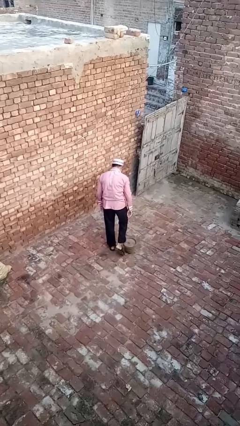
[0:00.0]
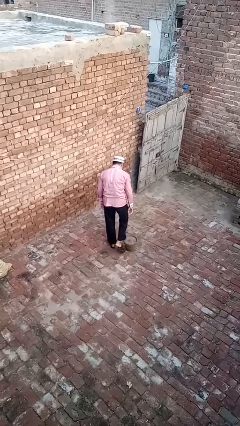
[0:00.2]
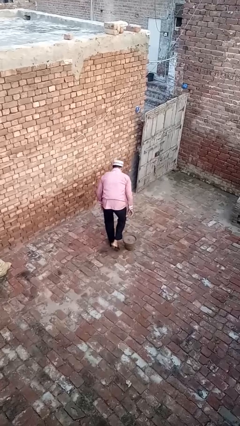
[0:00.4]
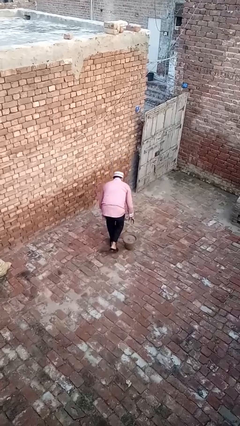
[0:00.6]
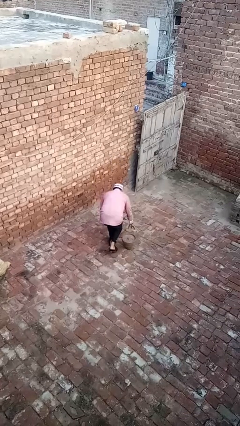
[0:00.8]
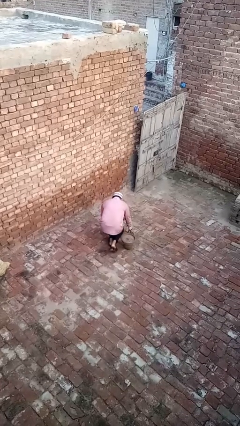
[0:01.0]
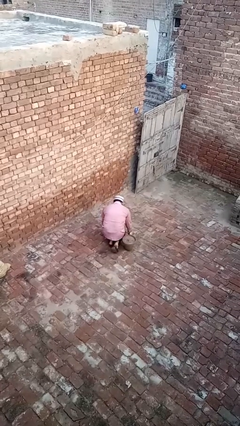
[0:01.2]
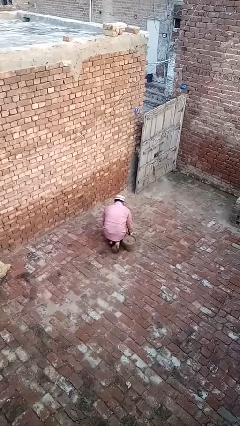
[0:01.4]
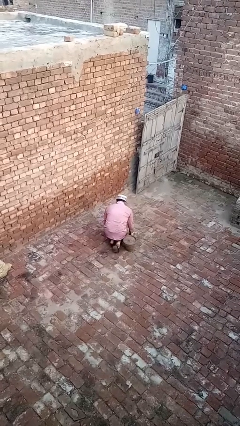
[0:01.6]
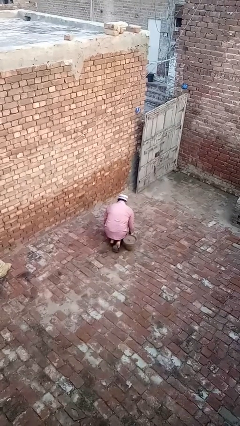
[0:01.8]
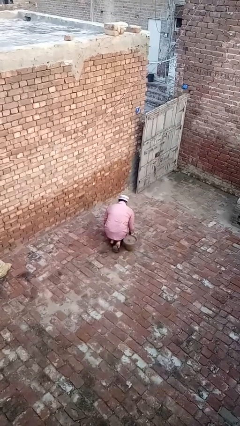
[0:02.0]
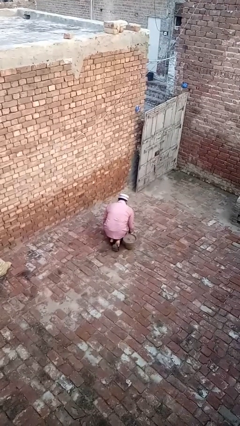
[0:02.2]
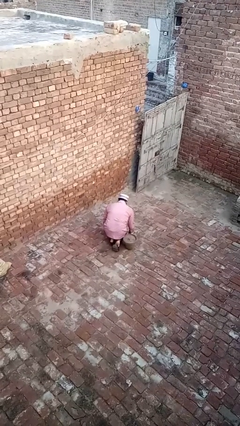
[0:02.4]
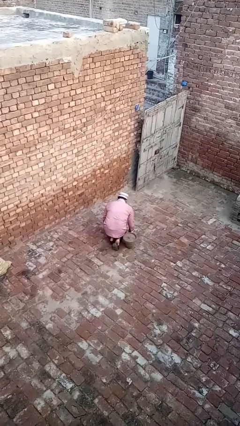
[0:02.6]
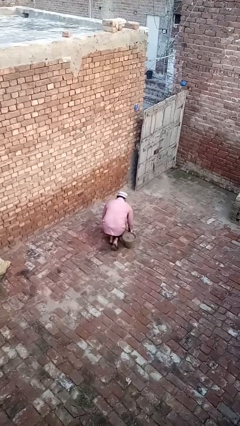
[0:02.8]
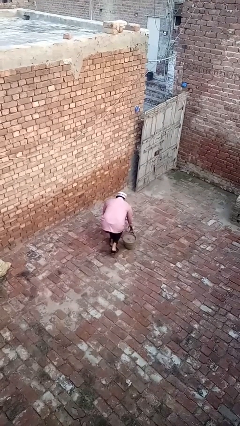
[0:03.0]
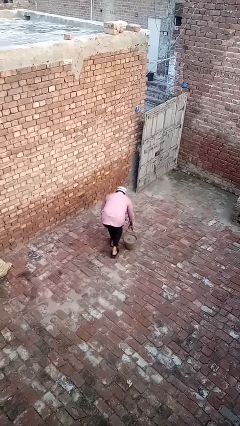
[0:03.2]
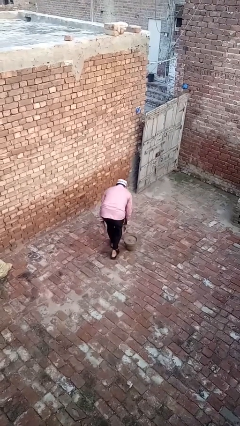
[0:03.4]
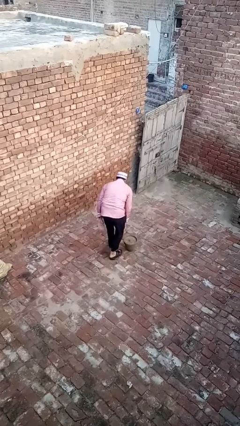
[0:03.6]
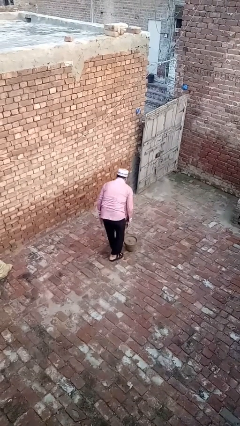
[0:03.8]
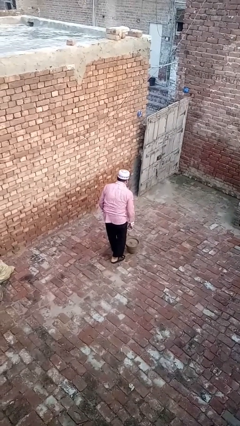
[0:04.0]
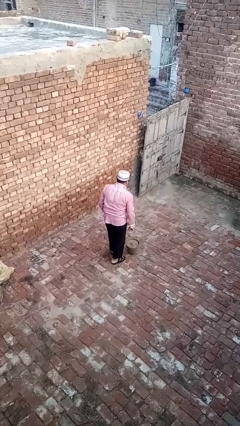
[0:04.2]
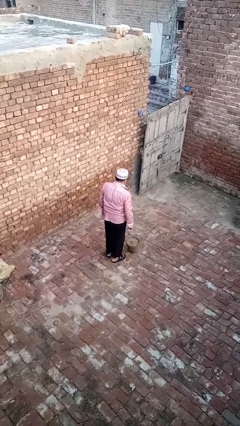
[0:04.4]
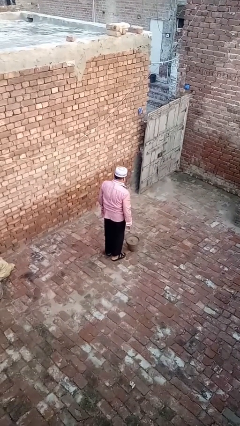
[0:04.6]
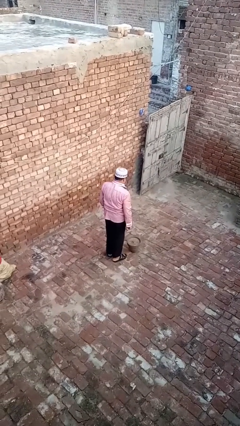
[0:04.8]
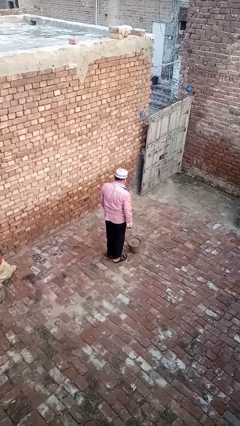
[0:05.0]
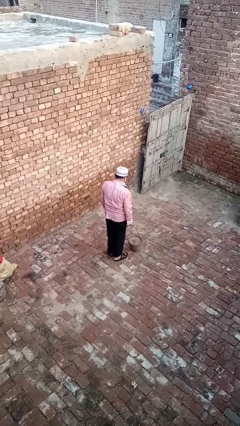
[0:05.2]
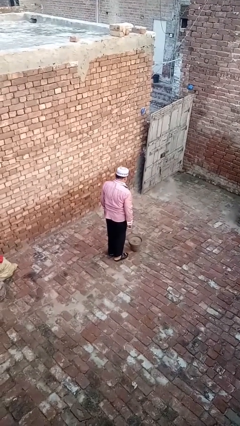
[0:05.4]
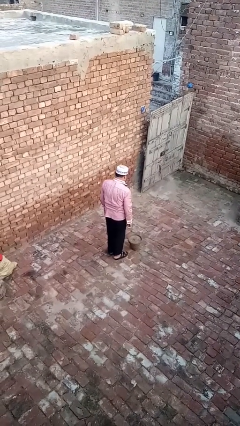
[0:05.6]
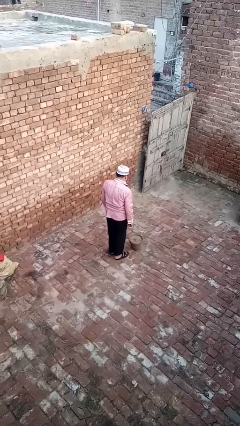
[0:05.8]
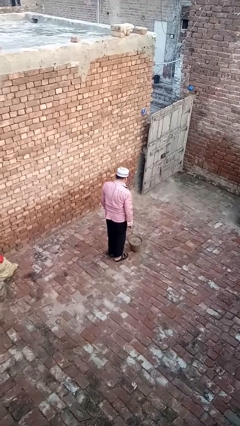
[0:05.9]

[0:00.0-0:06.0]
person lies down on floor

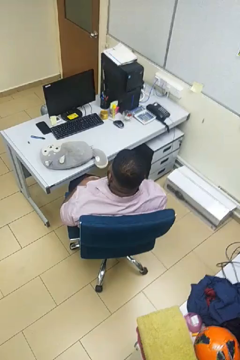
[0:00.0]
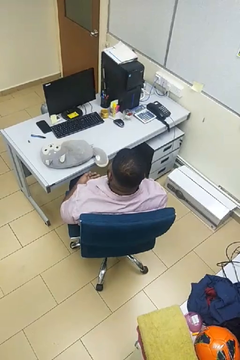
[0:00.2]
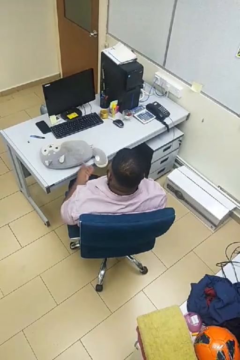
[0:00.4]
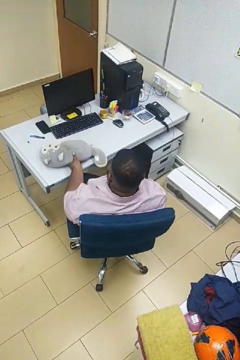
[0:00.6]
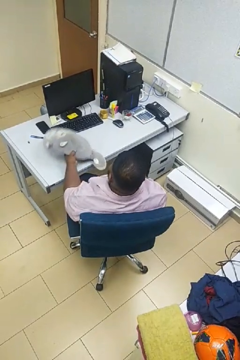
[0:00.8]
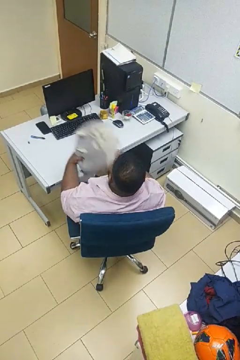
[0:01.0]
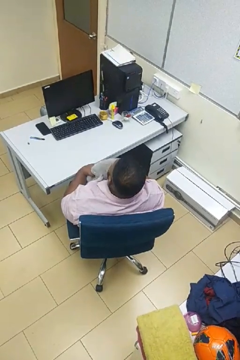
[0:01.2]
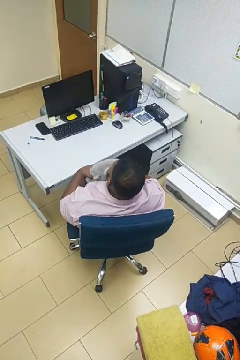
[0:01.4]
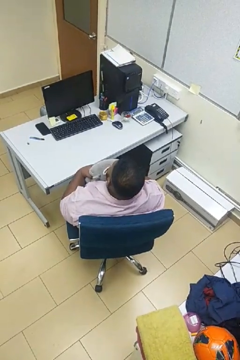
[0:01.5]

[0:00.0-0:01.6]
person hugs stuffed animal

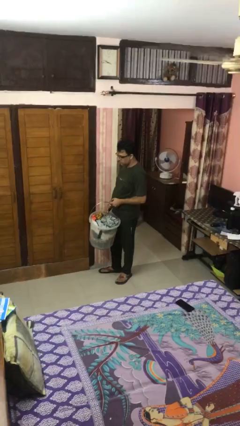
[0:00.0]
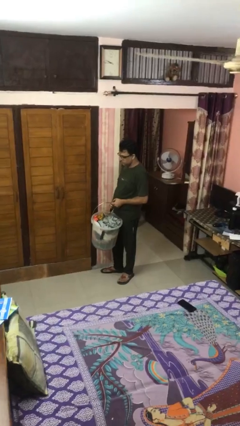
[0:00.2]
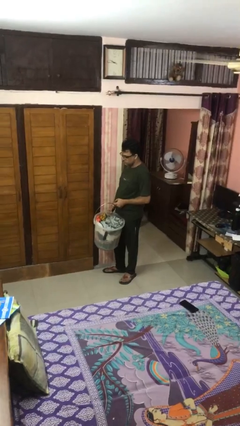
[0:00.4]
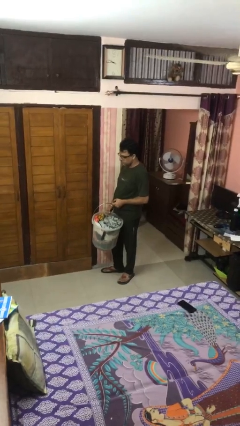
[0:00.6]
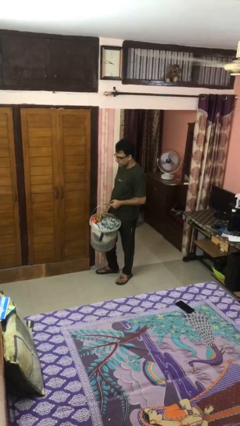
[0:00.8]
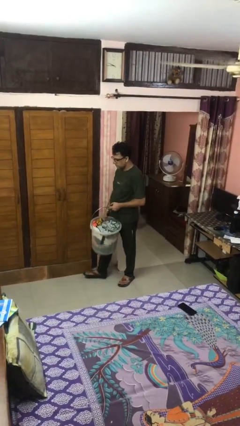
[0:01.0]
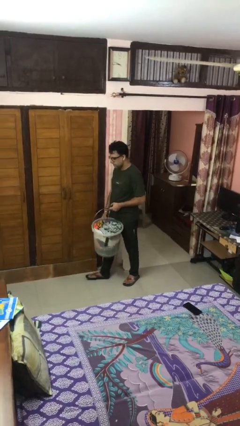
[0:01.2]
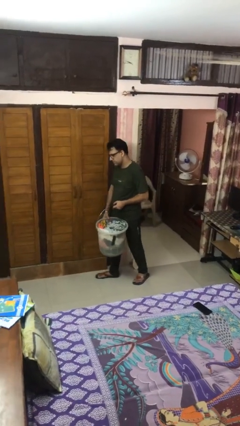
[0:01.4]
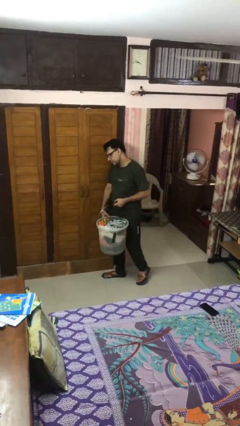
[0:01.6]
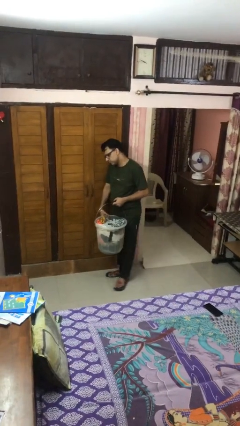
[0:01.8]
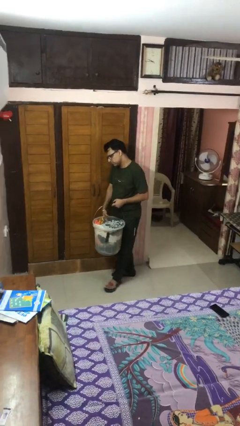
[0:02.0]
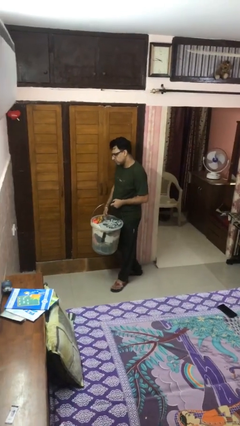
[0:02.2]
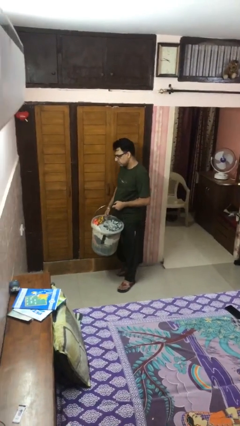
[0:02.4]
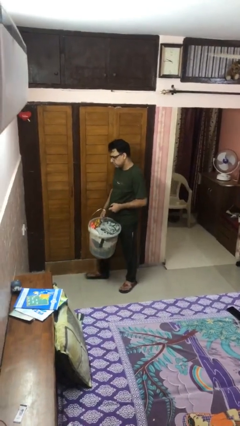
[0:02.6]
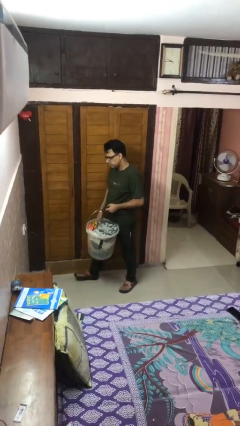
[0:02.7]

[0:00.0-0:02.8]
person carries laundry basket

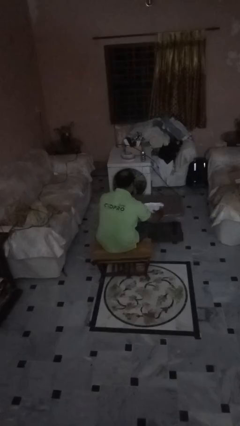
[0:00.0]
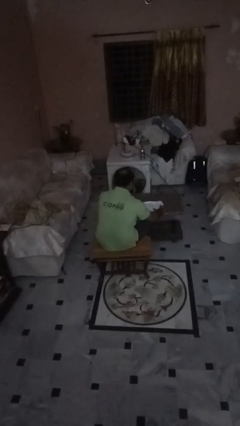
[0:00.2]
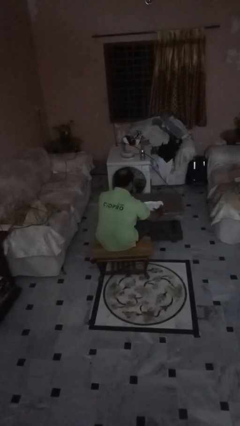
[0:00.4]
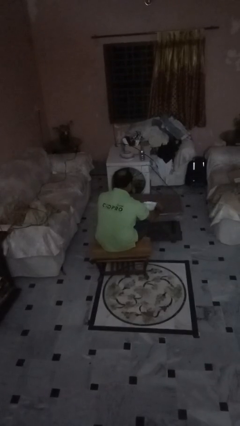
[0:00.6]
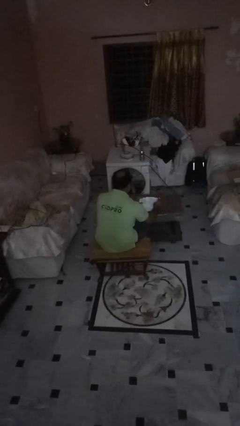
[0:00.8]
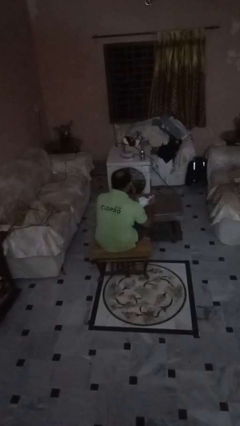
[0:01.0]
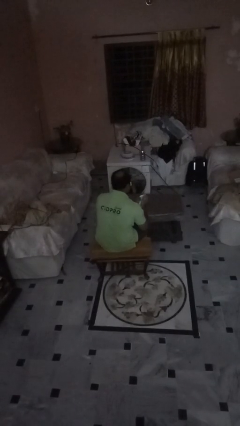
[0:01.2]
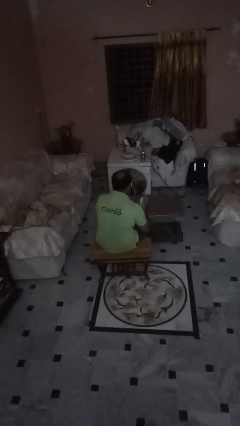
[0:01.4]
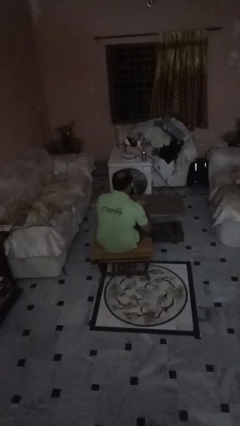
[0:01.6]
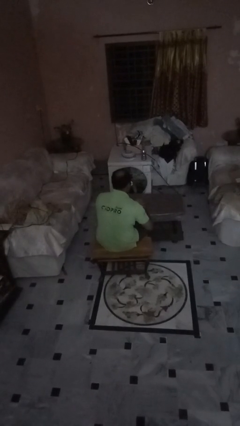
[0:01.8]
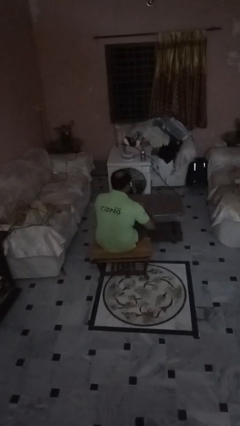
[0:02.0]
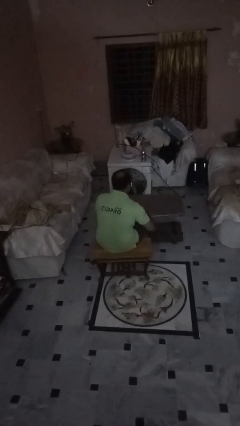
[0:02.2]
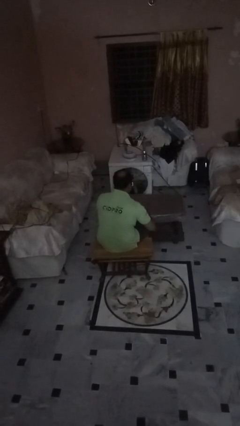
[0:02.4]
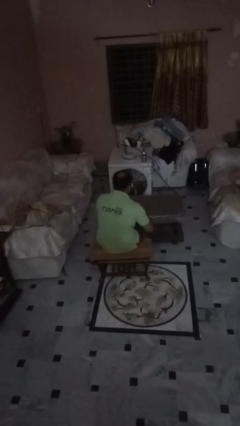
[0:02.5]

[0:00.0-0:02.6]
person crumples paper

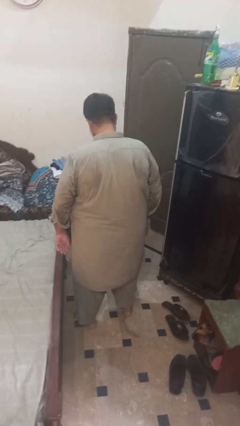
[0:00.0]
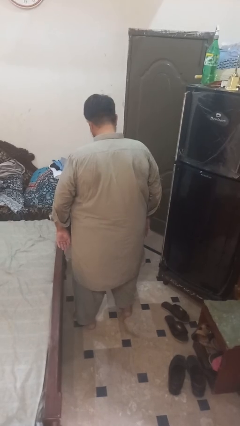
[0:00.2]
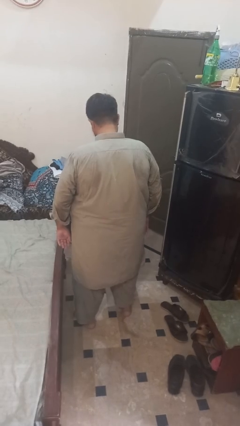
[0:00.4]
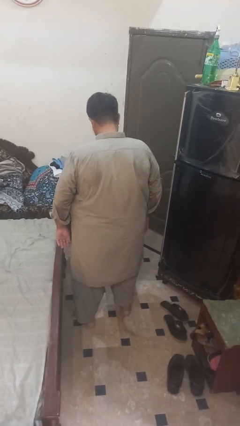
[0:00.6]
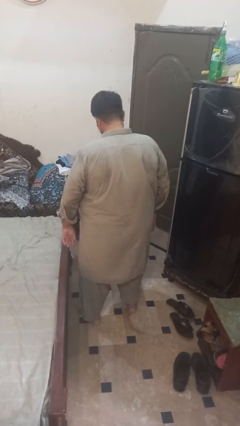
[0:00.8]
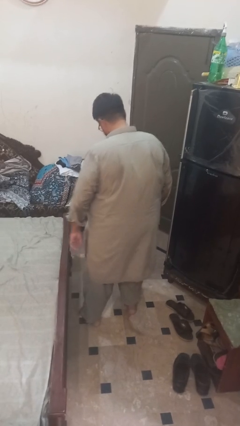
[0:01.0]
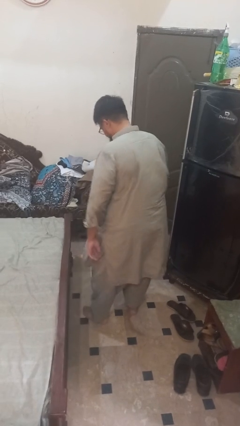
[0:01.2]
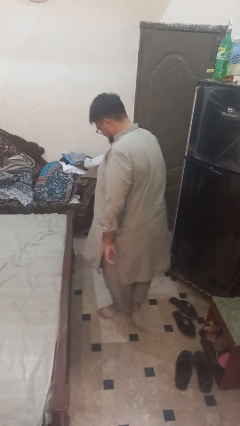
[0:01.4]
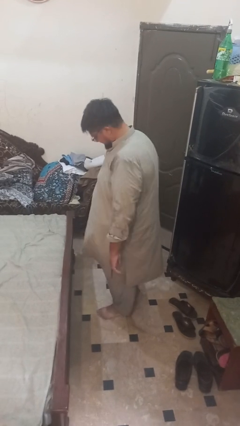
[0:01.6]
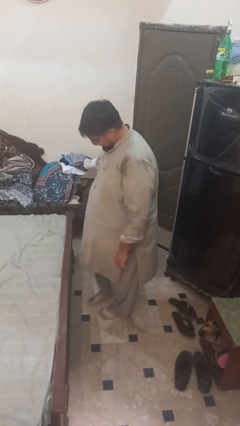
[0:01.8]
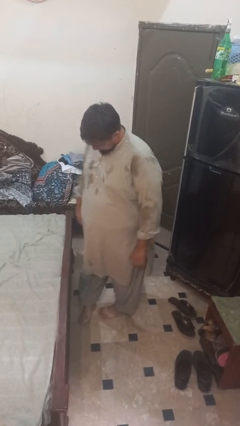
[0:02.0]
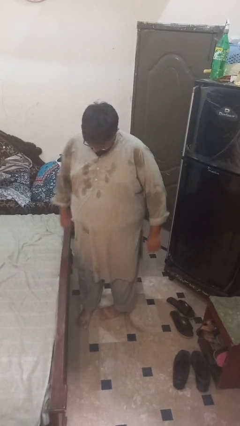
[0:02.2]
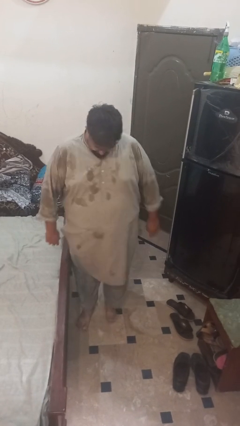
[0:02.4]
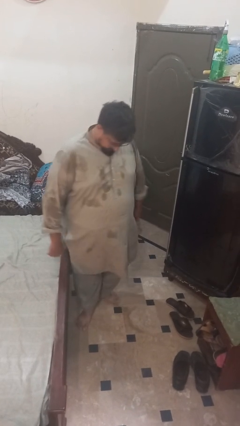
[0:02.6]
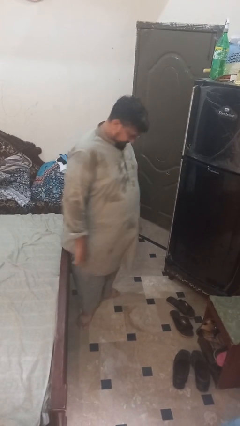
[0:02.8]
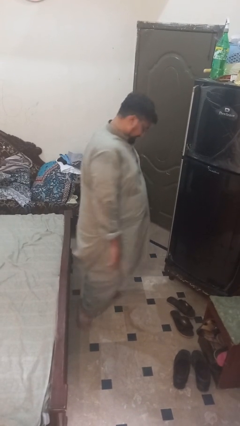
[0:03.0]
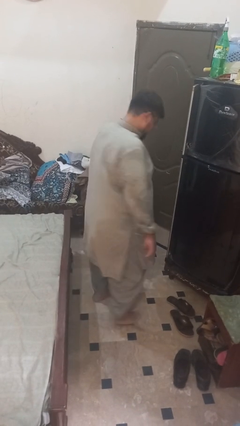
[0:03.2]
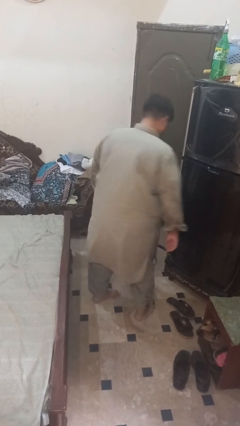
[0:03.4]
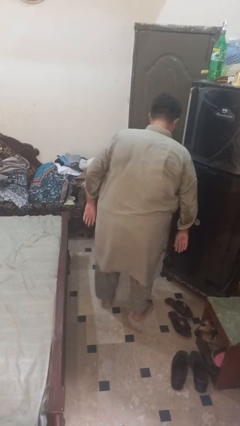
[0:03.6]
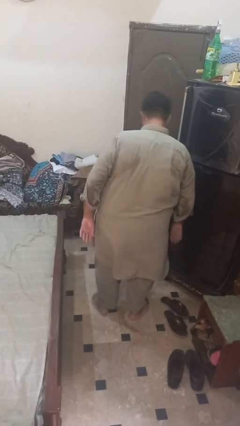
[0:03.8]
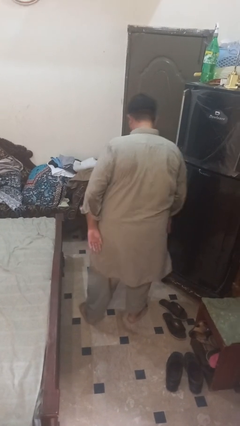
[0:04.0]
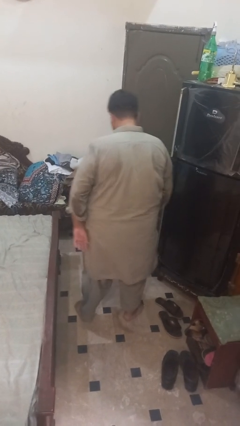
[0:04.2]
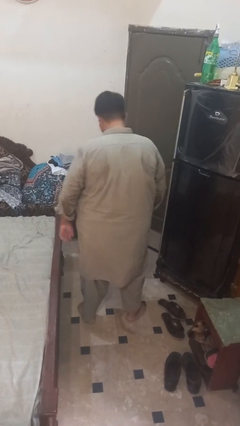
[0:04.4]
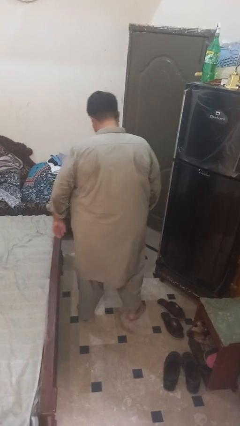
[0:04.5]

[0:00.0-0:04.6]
person twirls
